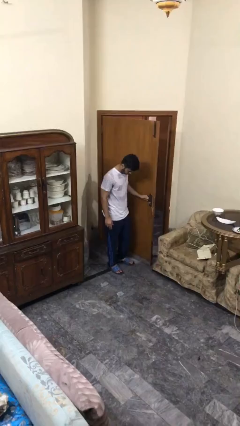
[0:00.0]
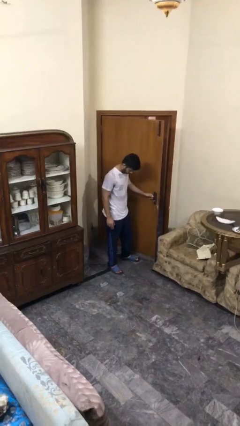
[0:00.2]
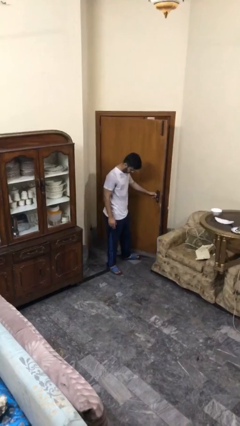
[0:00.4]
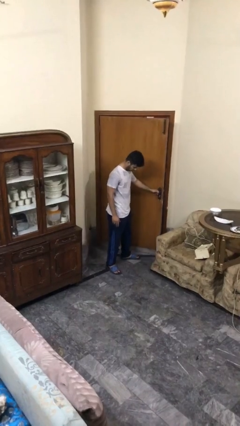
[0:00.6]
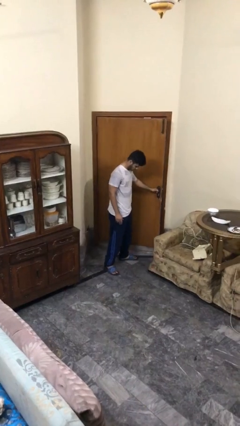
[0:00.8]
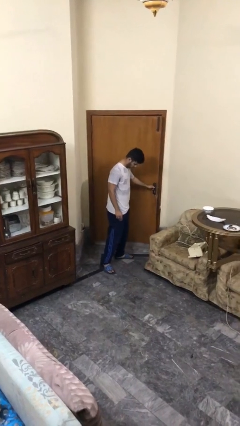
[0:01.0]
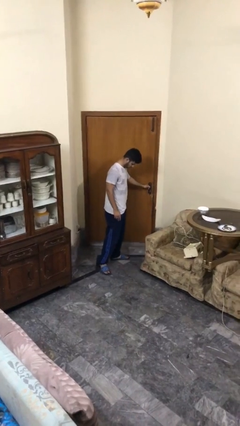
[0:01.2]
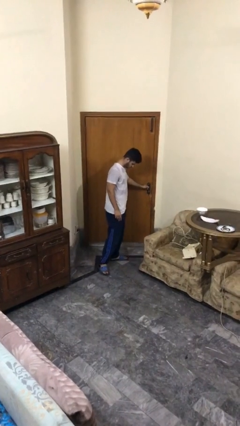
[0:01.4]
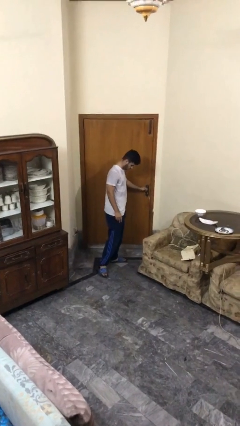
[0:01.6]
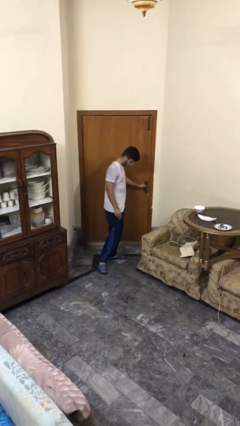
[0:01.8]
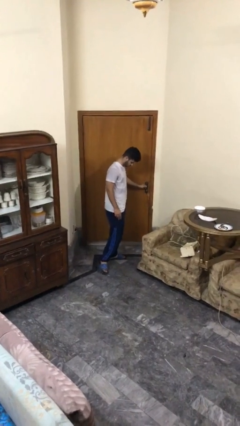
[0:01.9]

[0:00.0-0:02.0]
person closes facility door

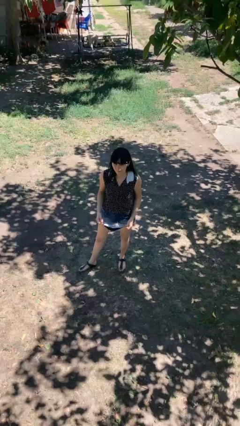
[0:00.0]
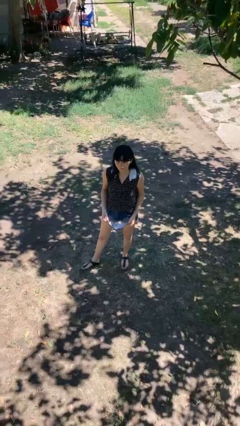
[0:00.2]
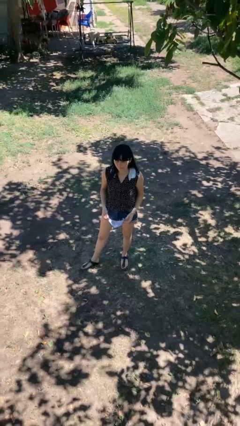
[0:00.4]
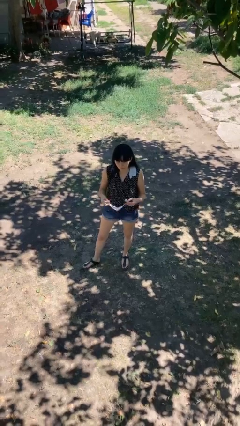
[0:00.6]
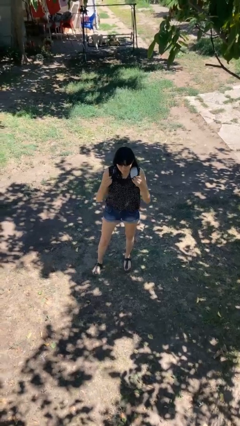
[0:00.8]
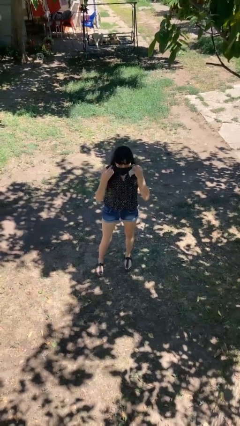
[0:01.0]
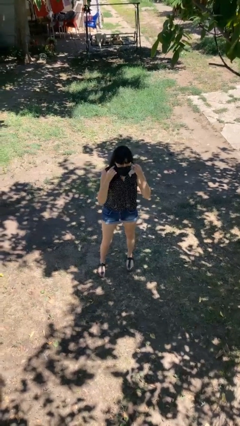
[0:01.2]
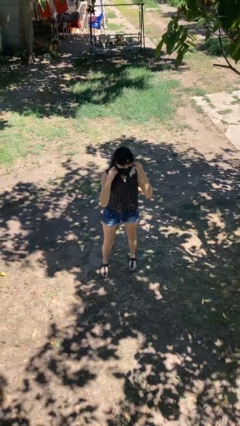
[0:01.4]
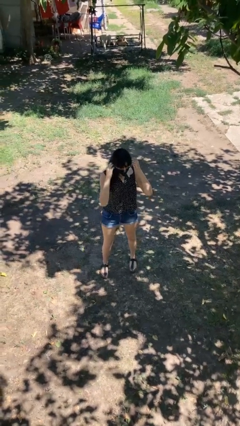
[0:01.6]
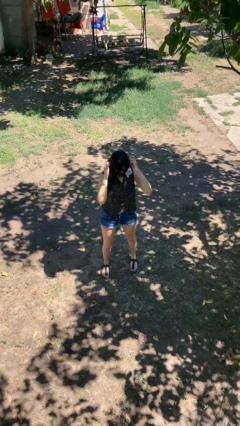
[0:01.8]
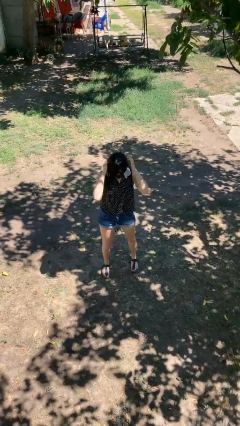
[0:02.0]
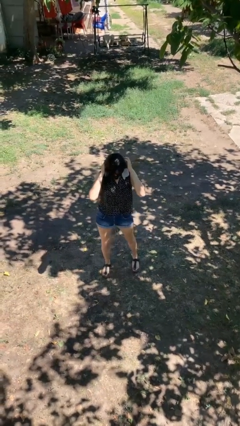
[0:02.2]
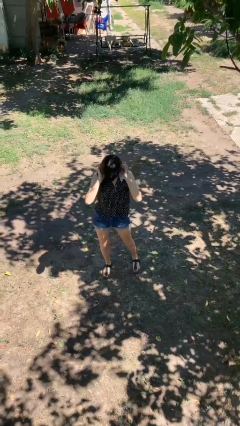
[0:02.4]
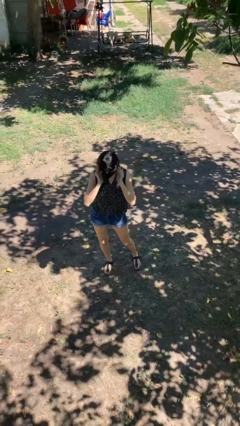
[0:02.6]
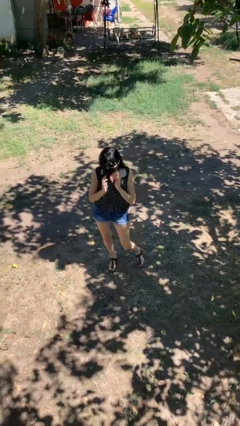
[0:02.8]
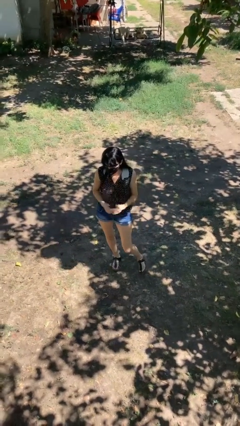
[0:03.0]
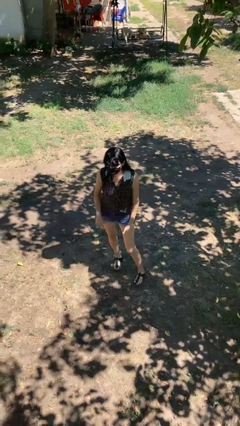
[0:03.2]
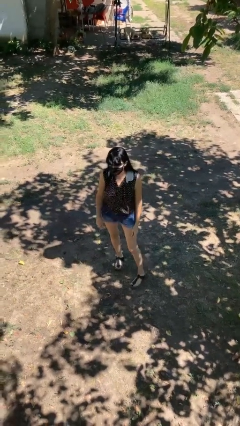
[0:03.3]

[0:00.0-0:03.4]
person puts on facemask

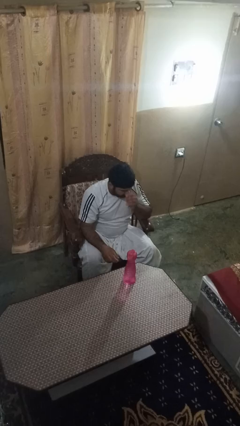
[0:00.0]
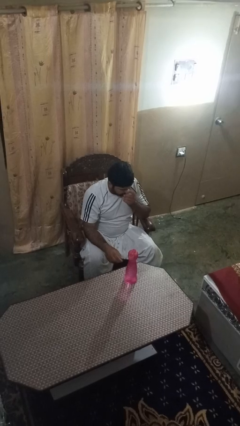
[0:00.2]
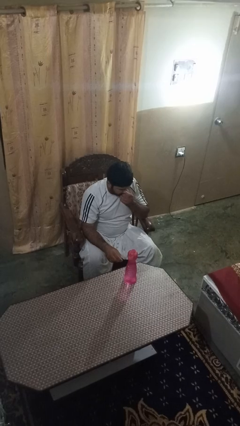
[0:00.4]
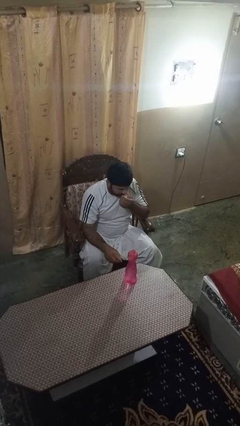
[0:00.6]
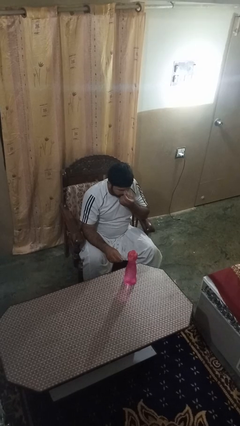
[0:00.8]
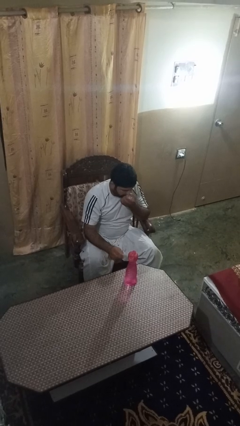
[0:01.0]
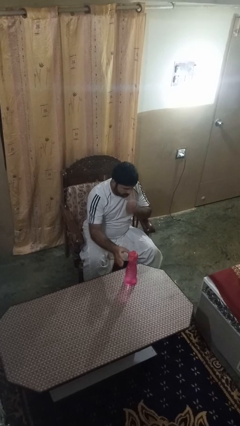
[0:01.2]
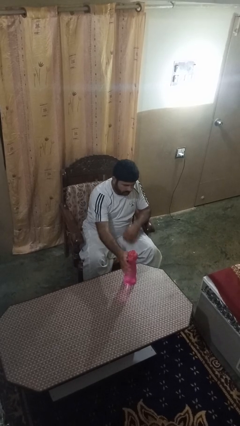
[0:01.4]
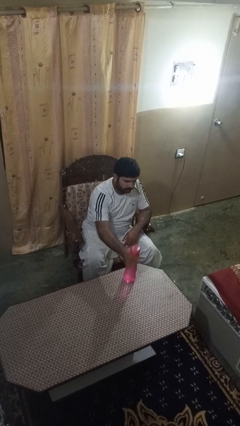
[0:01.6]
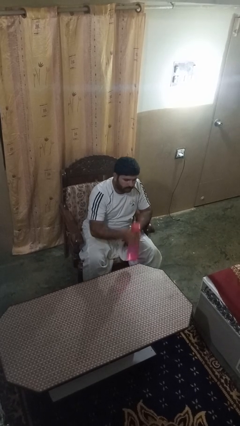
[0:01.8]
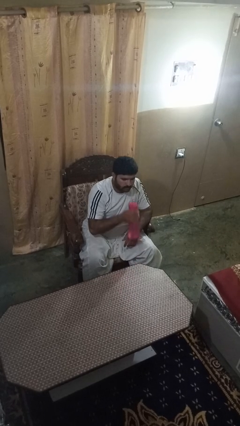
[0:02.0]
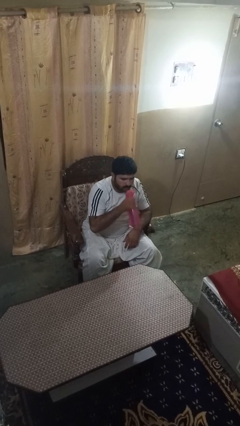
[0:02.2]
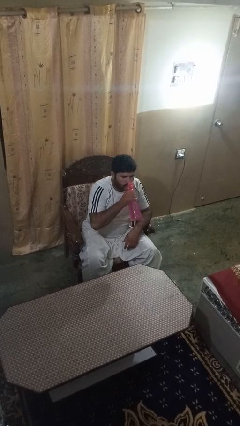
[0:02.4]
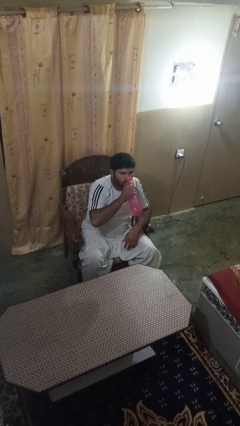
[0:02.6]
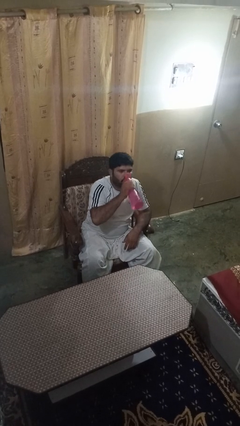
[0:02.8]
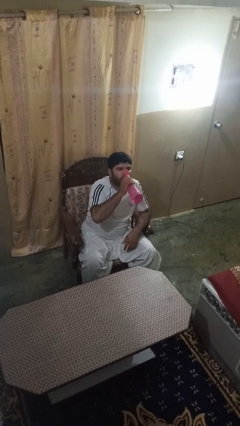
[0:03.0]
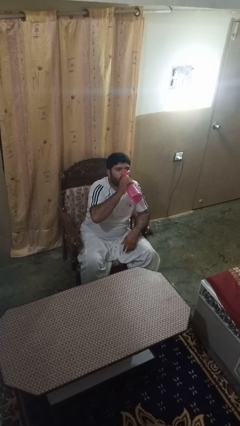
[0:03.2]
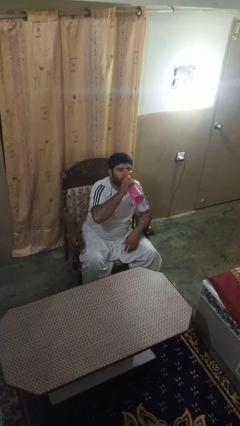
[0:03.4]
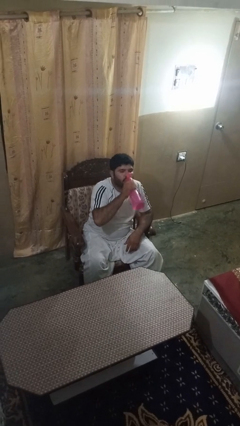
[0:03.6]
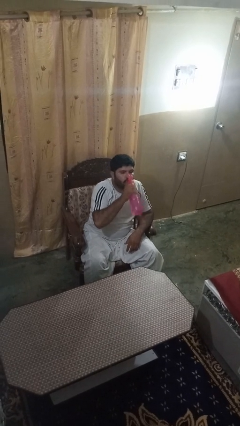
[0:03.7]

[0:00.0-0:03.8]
person drinks from bottle

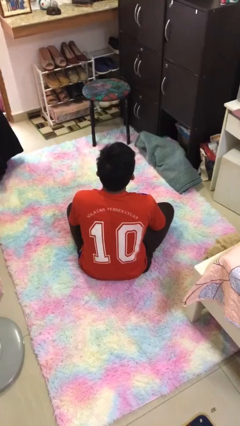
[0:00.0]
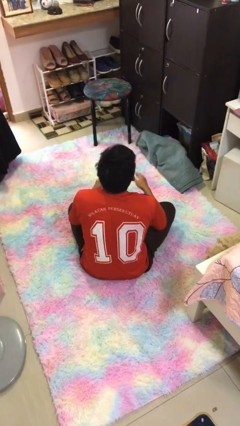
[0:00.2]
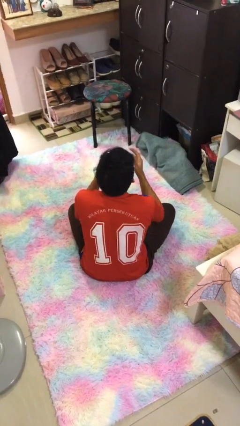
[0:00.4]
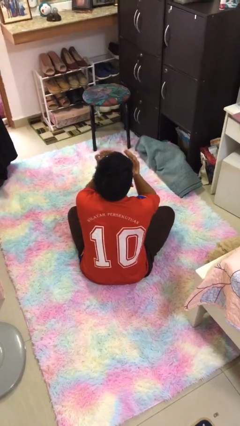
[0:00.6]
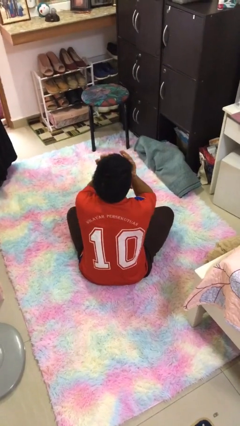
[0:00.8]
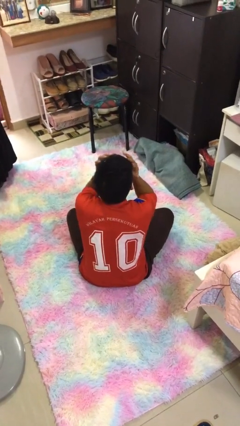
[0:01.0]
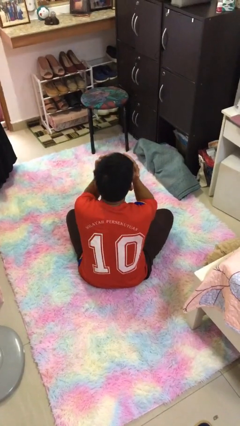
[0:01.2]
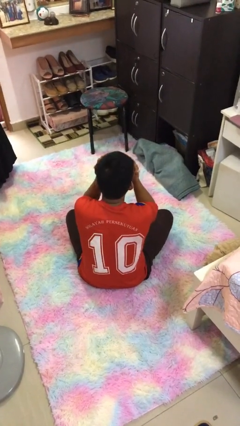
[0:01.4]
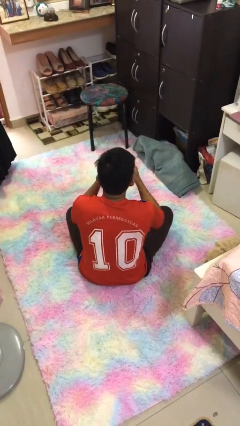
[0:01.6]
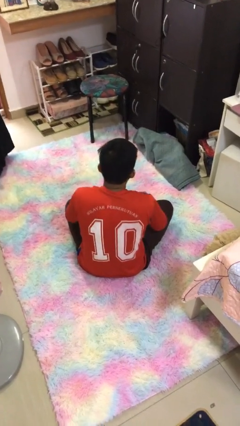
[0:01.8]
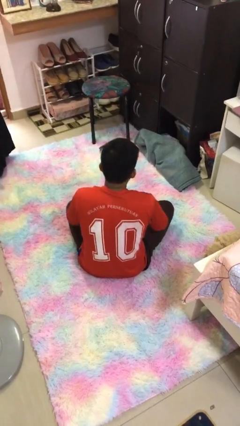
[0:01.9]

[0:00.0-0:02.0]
person covers face with hands

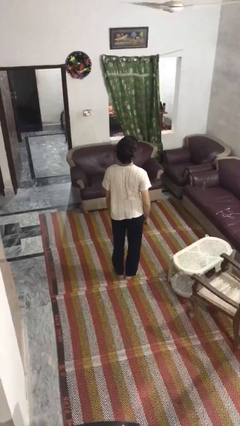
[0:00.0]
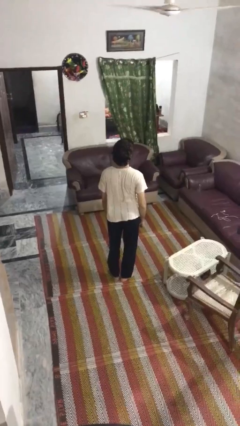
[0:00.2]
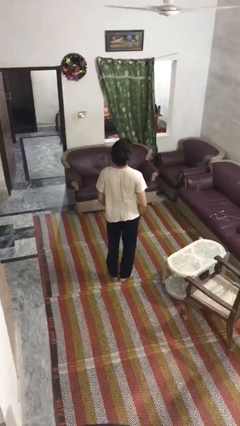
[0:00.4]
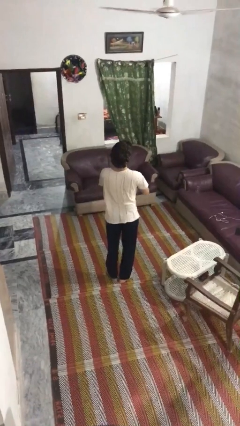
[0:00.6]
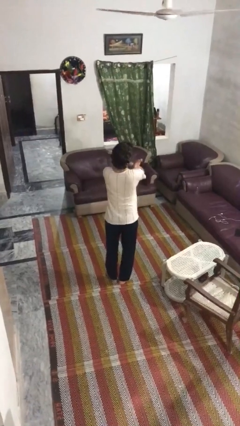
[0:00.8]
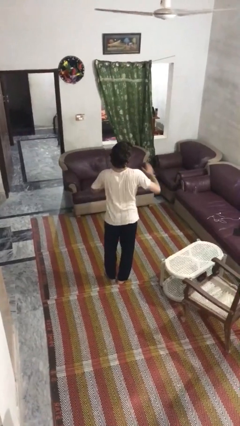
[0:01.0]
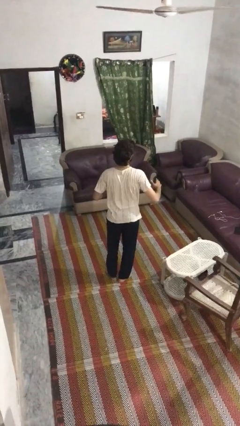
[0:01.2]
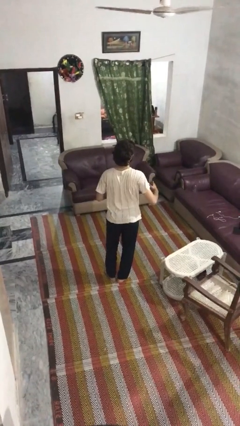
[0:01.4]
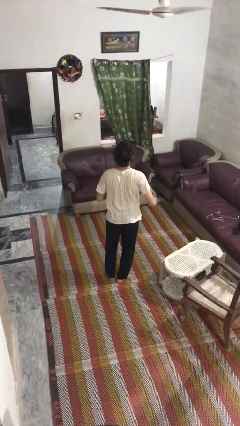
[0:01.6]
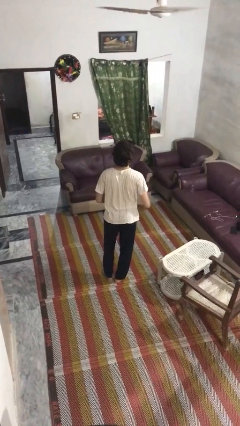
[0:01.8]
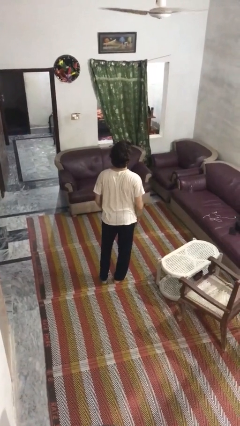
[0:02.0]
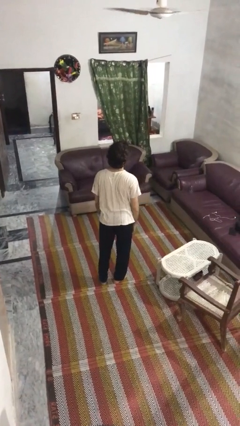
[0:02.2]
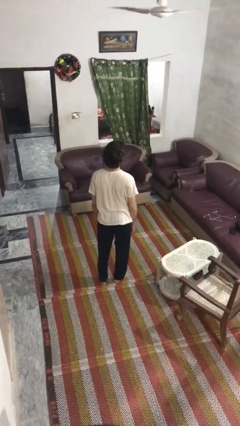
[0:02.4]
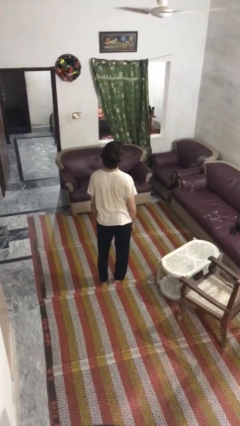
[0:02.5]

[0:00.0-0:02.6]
person karate chop

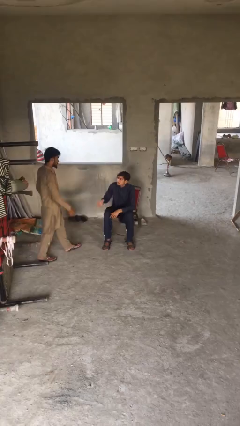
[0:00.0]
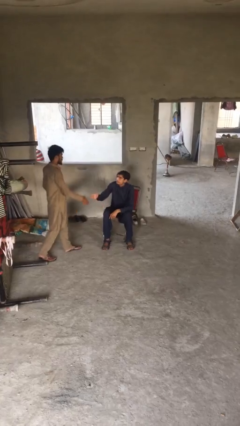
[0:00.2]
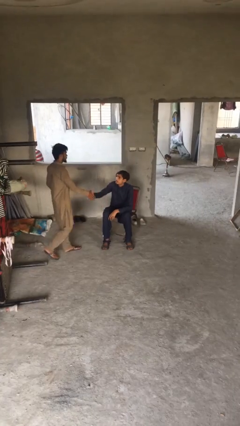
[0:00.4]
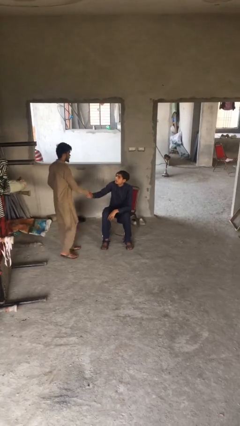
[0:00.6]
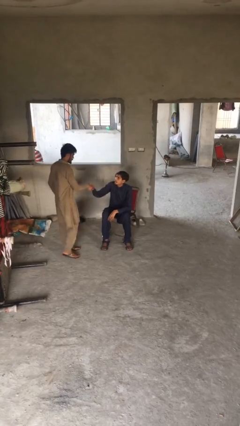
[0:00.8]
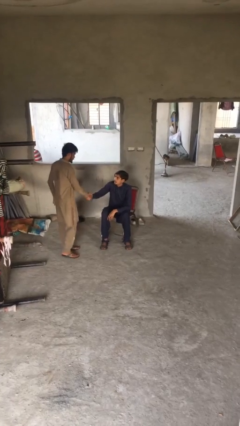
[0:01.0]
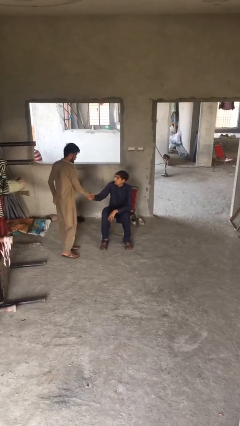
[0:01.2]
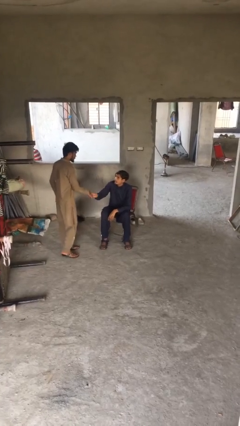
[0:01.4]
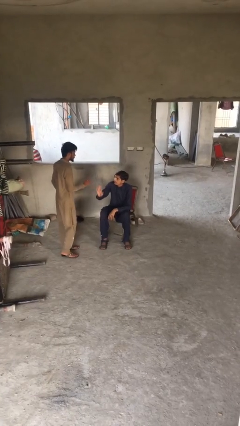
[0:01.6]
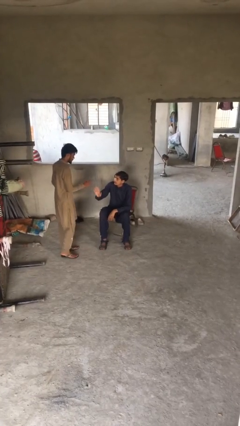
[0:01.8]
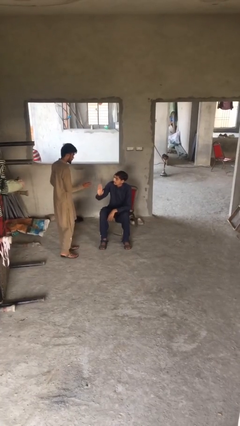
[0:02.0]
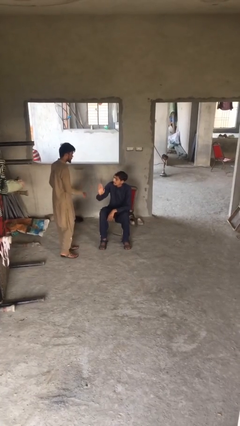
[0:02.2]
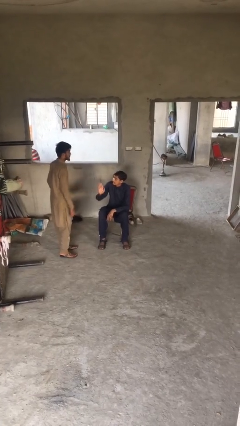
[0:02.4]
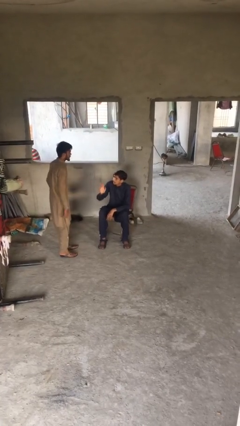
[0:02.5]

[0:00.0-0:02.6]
person shakes hand

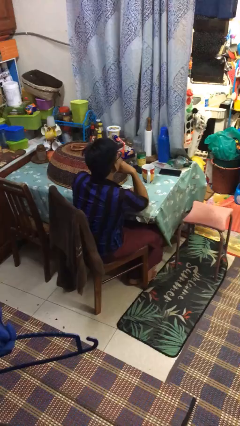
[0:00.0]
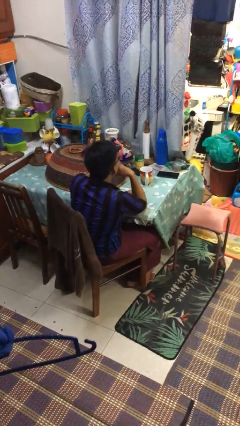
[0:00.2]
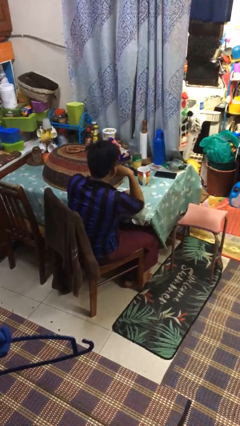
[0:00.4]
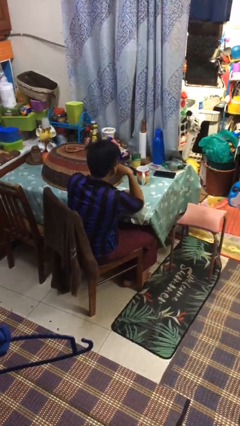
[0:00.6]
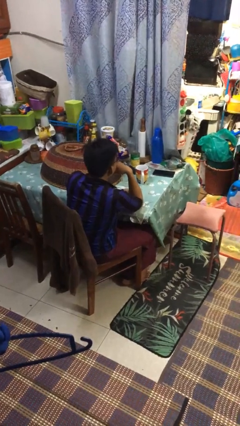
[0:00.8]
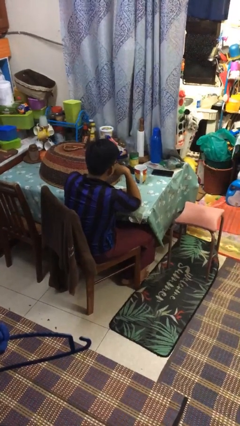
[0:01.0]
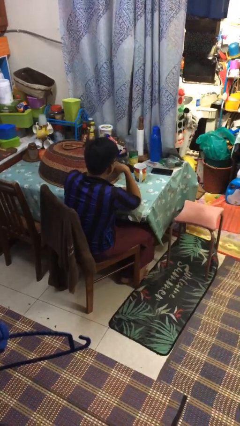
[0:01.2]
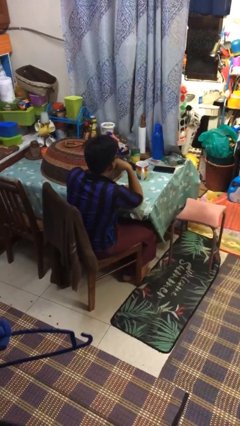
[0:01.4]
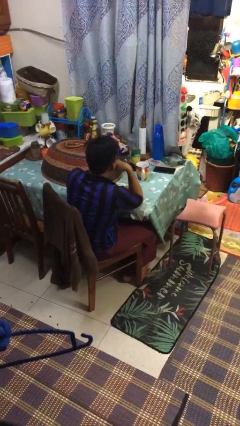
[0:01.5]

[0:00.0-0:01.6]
person nods head
